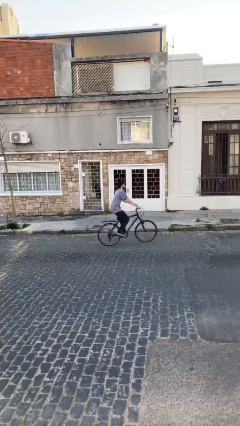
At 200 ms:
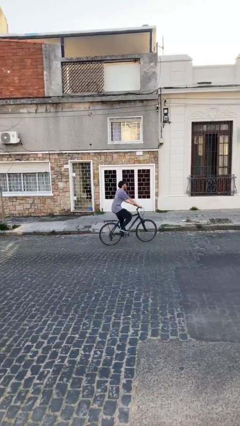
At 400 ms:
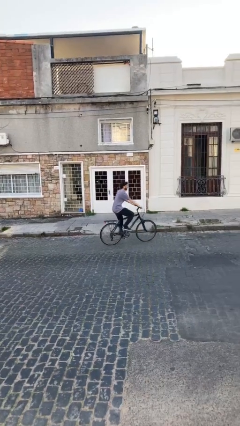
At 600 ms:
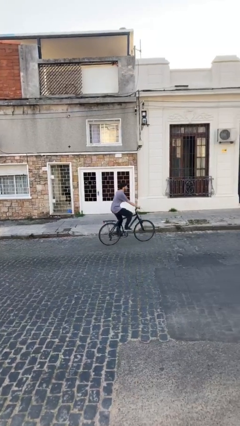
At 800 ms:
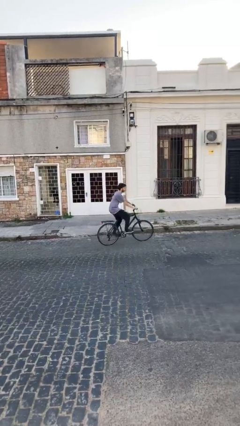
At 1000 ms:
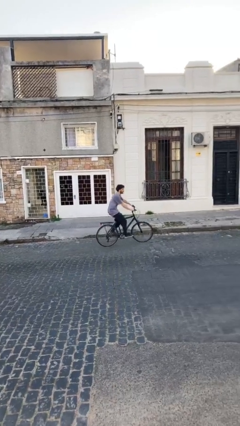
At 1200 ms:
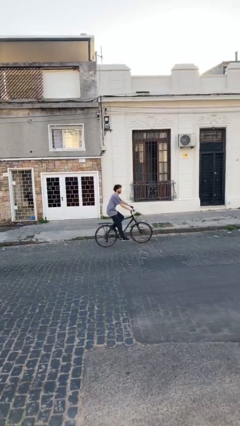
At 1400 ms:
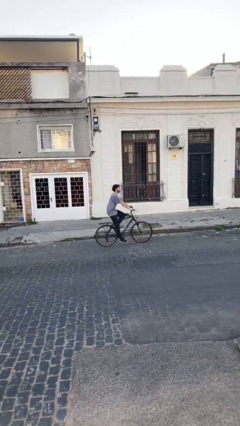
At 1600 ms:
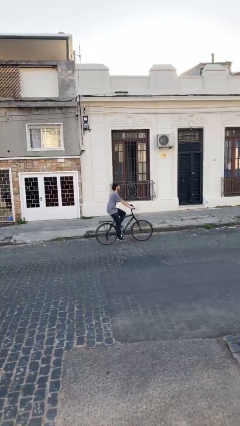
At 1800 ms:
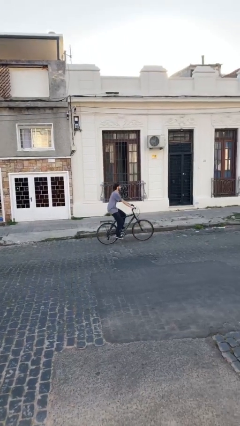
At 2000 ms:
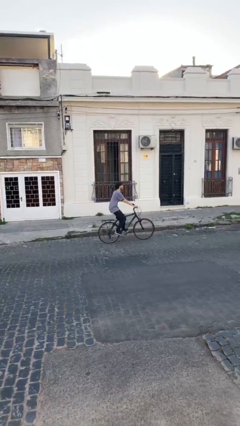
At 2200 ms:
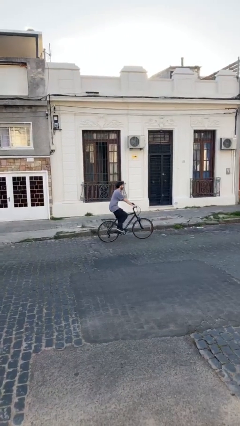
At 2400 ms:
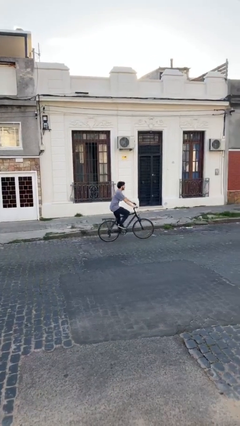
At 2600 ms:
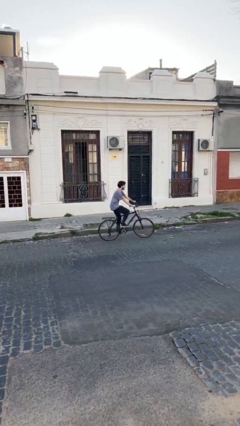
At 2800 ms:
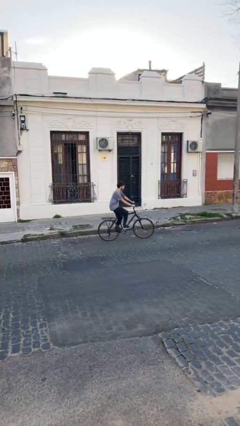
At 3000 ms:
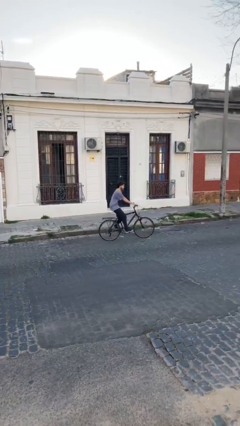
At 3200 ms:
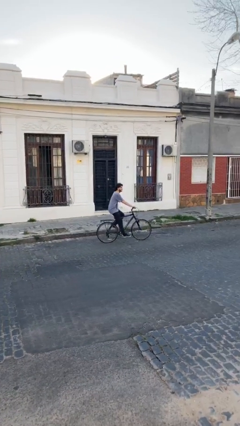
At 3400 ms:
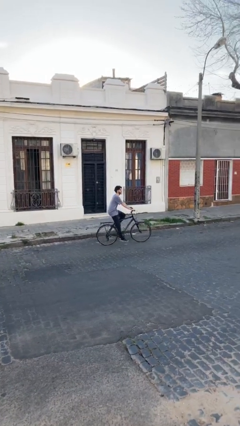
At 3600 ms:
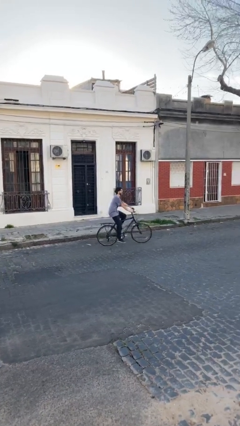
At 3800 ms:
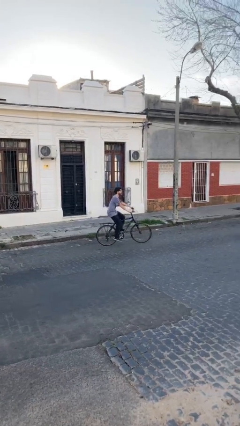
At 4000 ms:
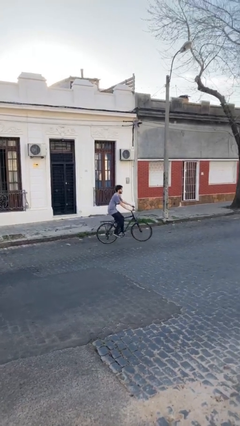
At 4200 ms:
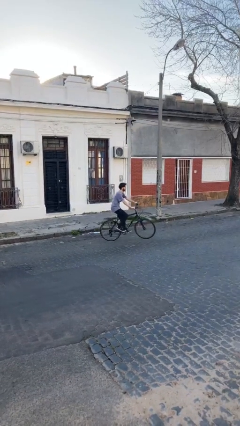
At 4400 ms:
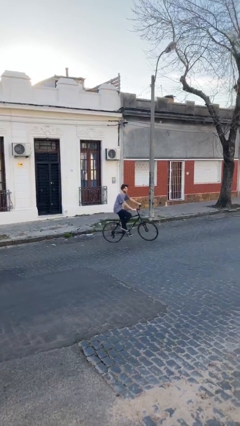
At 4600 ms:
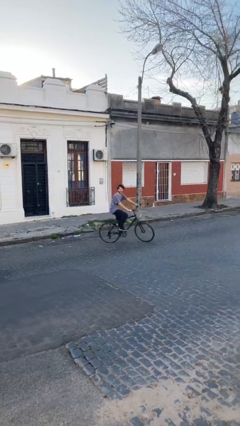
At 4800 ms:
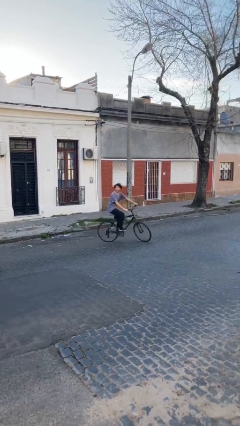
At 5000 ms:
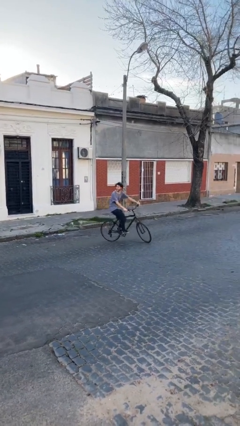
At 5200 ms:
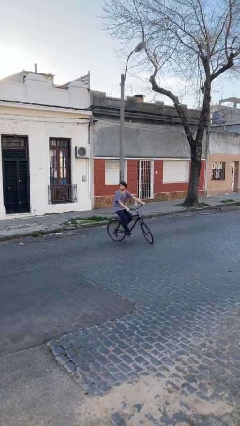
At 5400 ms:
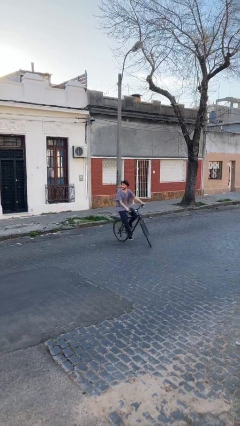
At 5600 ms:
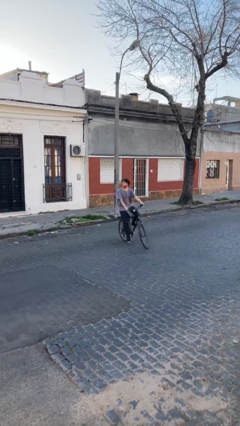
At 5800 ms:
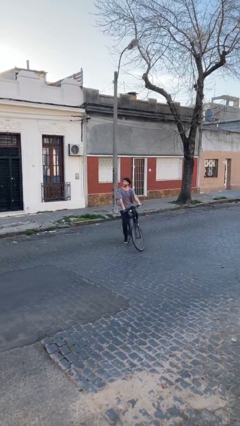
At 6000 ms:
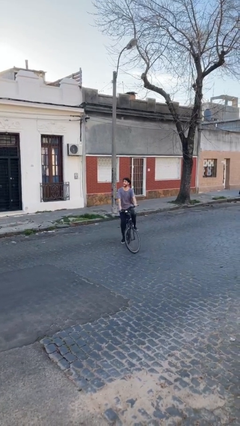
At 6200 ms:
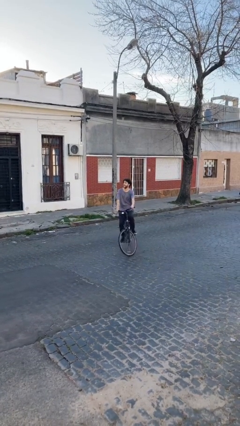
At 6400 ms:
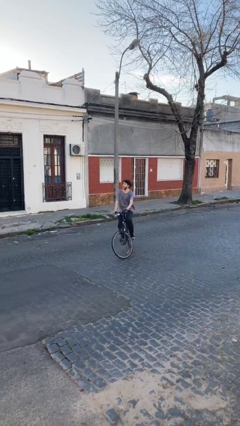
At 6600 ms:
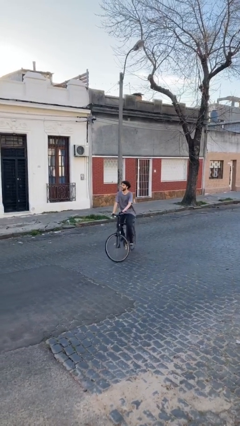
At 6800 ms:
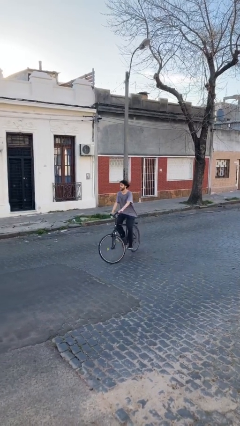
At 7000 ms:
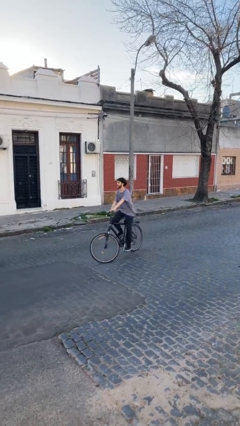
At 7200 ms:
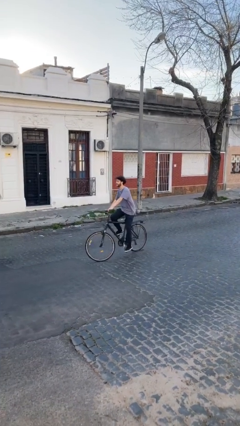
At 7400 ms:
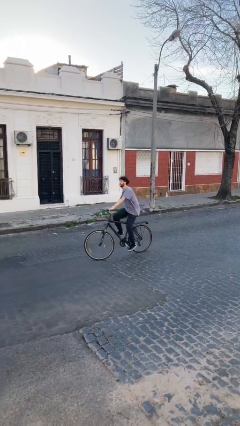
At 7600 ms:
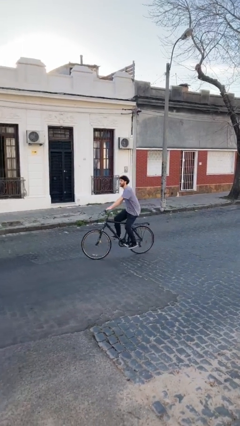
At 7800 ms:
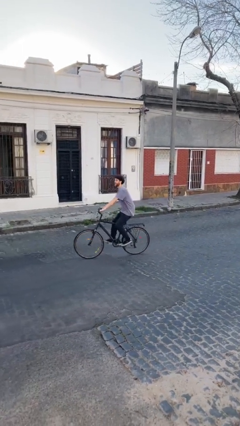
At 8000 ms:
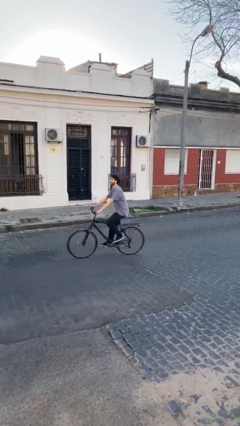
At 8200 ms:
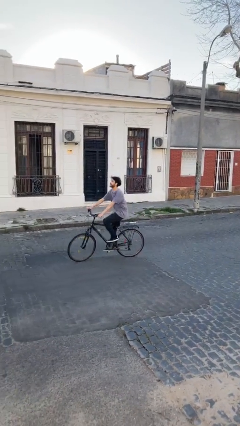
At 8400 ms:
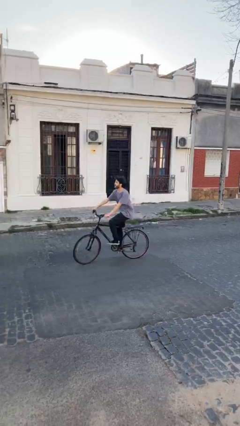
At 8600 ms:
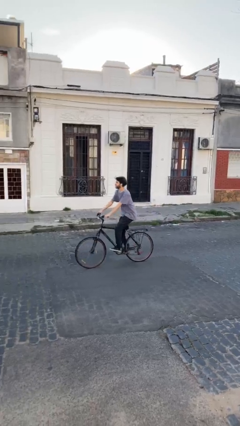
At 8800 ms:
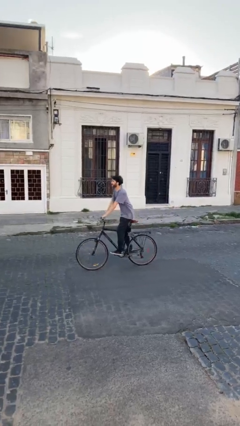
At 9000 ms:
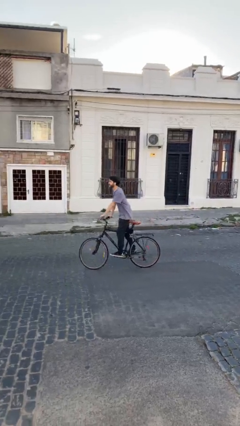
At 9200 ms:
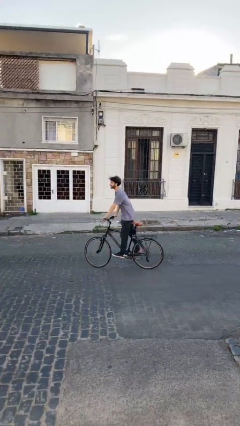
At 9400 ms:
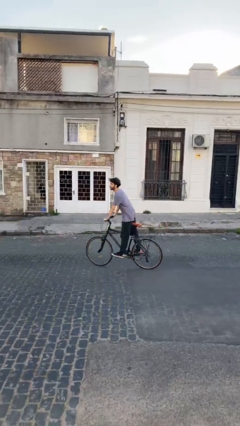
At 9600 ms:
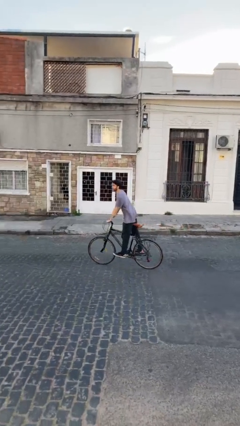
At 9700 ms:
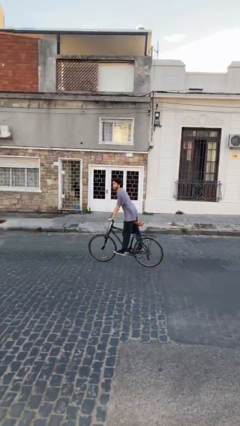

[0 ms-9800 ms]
person rides bicycle

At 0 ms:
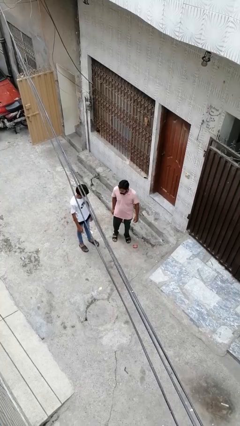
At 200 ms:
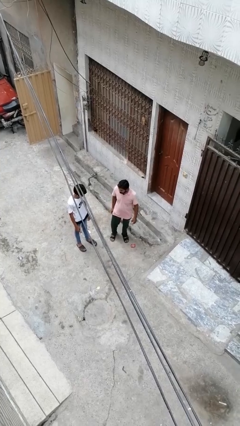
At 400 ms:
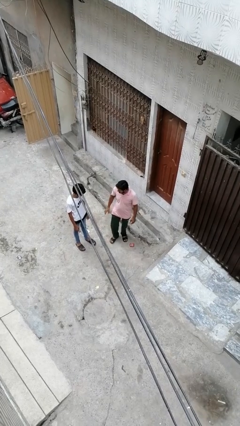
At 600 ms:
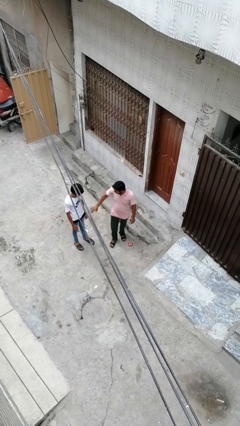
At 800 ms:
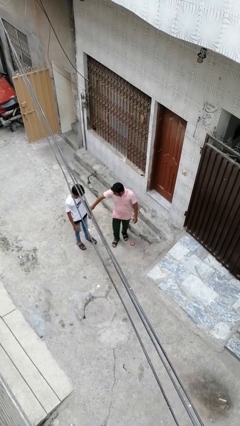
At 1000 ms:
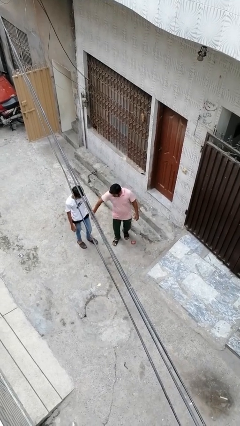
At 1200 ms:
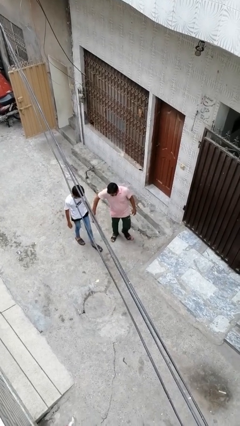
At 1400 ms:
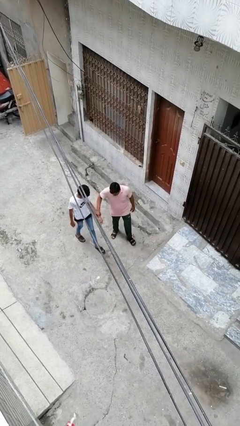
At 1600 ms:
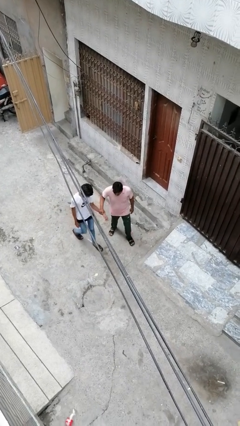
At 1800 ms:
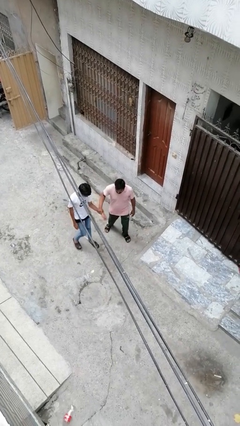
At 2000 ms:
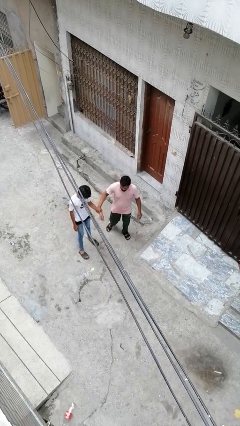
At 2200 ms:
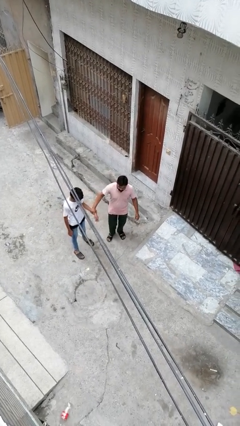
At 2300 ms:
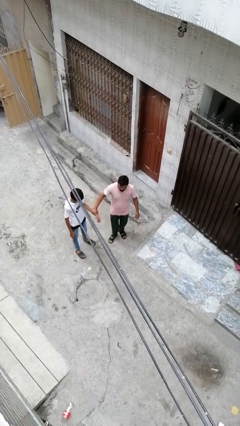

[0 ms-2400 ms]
person grabs person by forearm

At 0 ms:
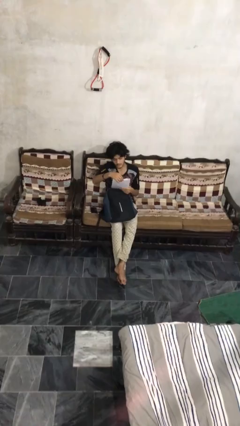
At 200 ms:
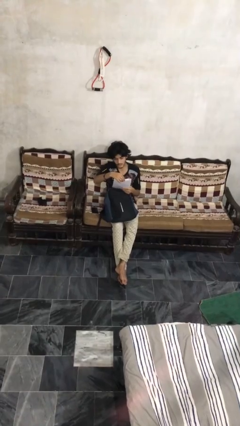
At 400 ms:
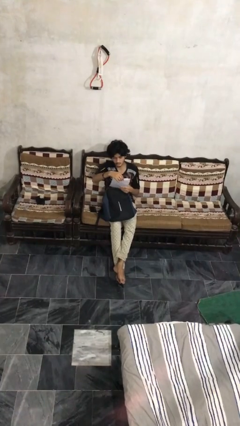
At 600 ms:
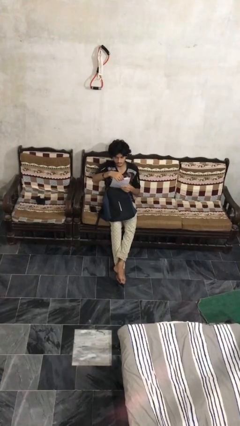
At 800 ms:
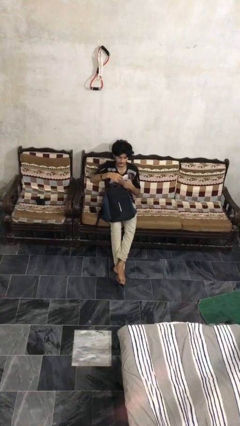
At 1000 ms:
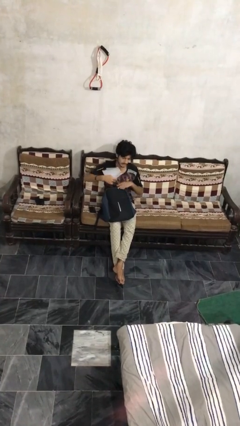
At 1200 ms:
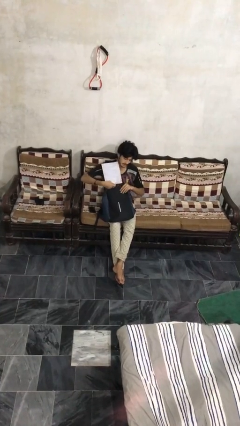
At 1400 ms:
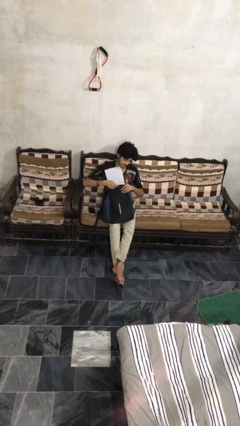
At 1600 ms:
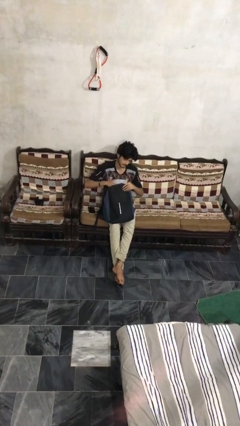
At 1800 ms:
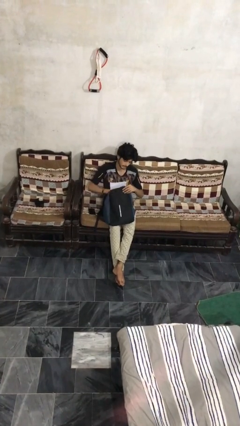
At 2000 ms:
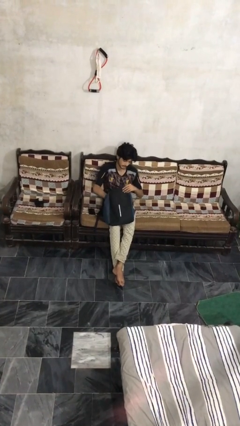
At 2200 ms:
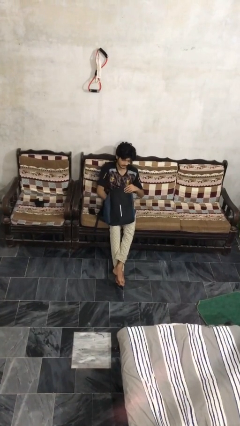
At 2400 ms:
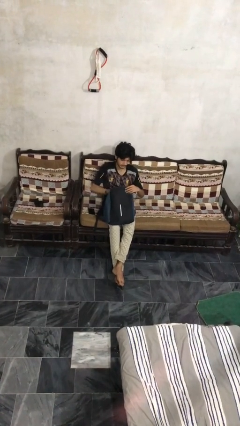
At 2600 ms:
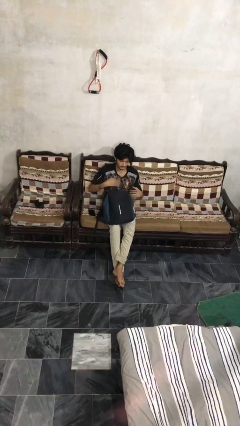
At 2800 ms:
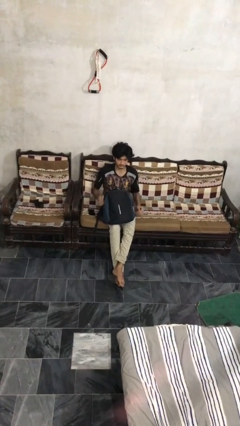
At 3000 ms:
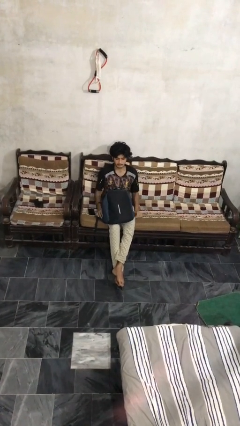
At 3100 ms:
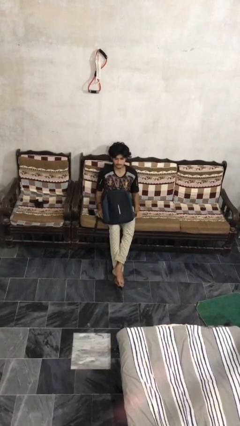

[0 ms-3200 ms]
person puts object into backpack

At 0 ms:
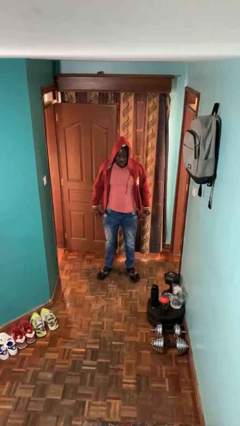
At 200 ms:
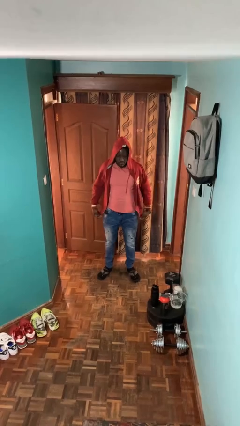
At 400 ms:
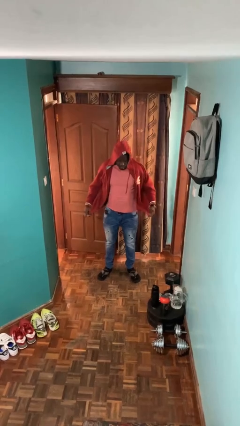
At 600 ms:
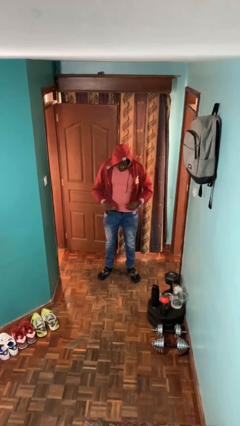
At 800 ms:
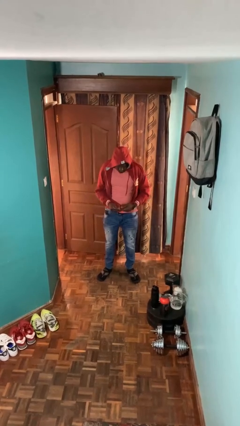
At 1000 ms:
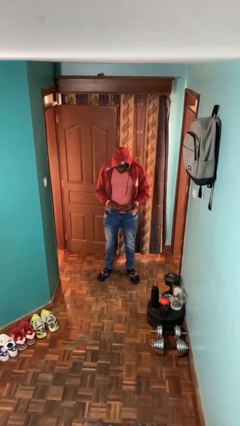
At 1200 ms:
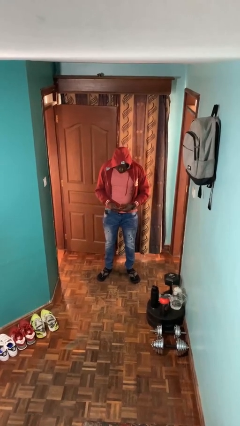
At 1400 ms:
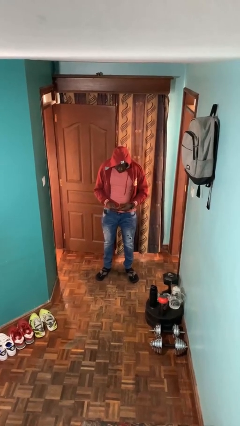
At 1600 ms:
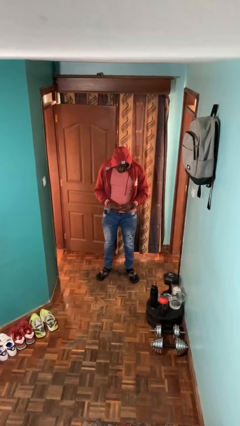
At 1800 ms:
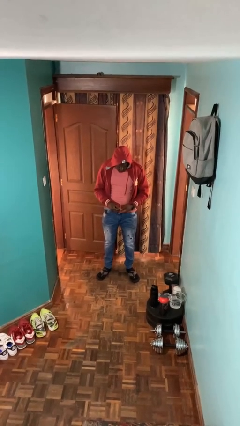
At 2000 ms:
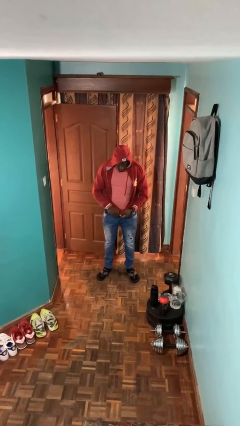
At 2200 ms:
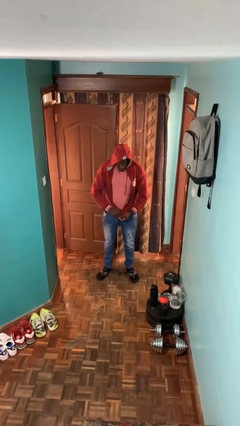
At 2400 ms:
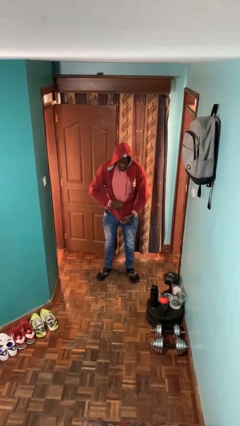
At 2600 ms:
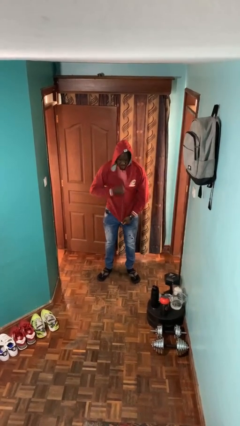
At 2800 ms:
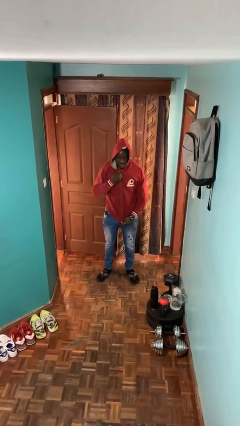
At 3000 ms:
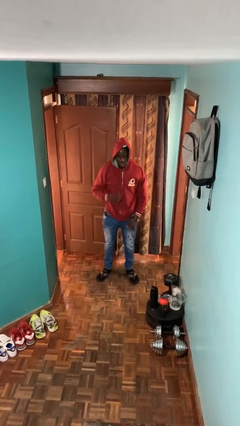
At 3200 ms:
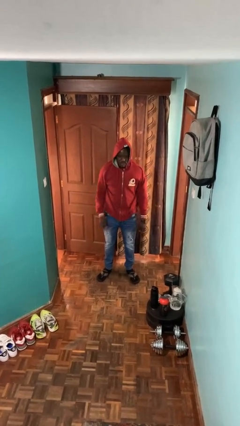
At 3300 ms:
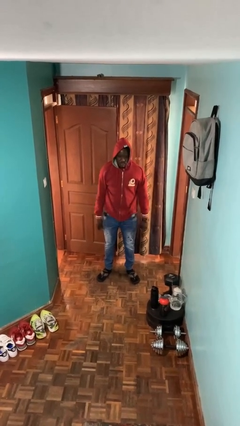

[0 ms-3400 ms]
person zips up jacket
